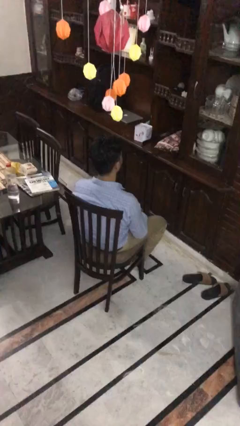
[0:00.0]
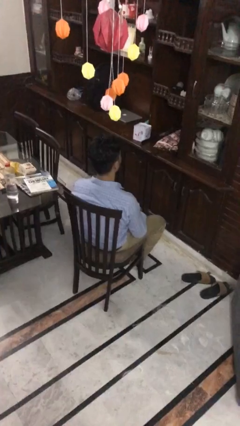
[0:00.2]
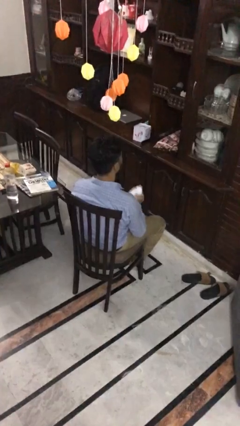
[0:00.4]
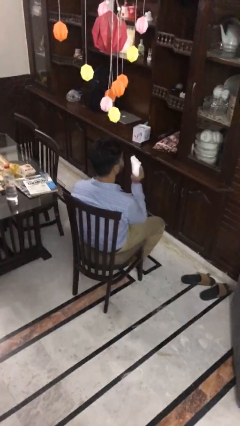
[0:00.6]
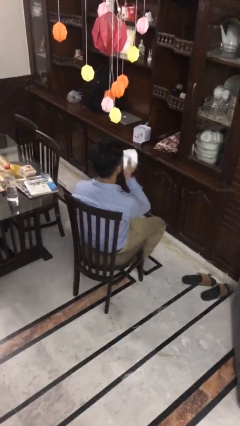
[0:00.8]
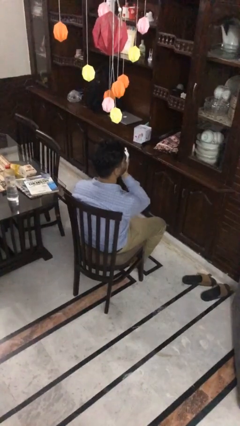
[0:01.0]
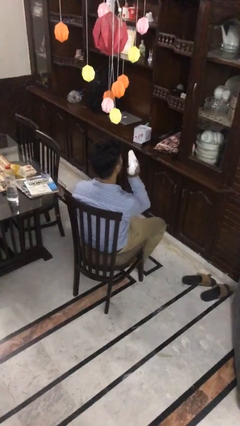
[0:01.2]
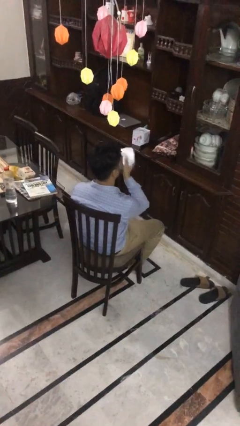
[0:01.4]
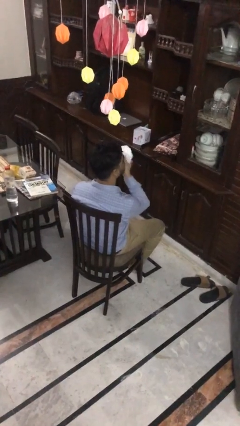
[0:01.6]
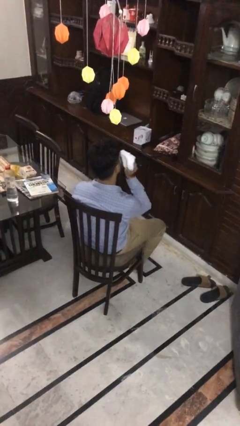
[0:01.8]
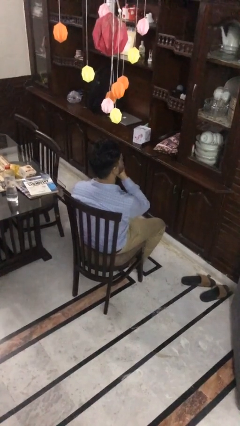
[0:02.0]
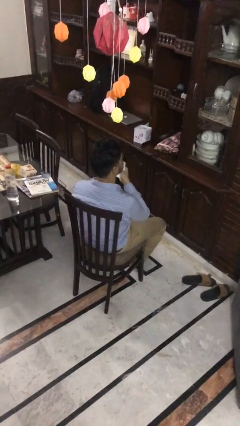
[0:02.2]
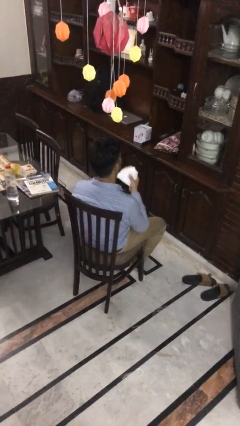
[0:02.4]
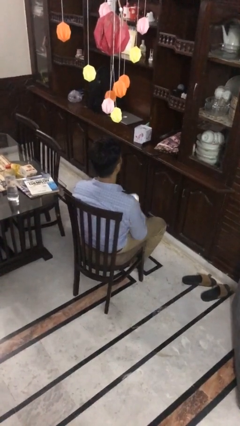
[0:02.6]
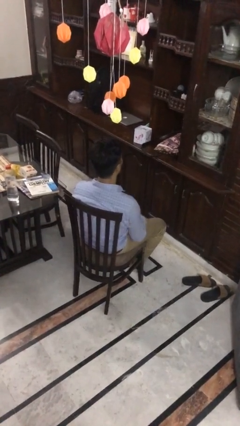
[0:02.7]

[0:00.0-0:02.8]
person wipes mouth with napkin

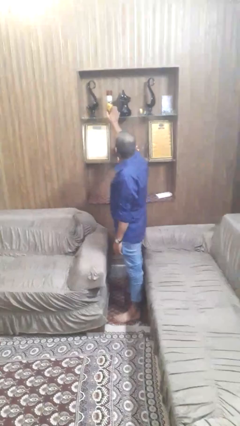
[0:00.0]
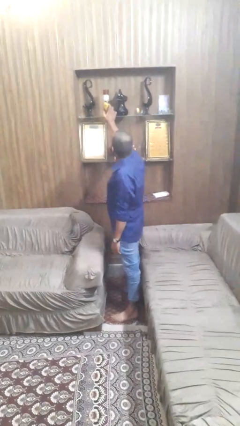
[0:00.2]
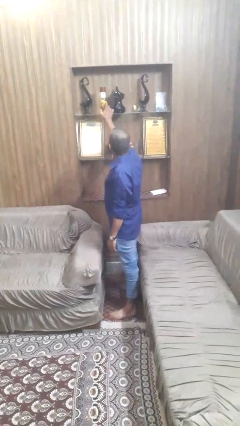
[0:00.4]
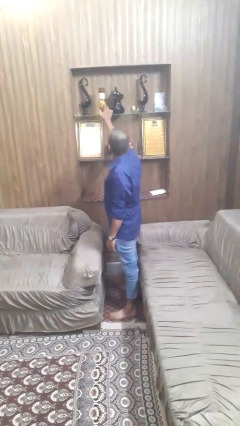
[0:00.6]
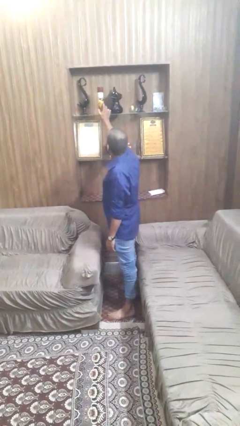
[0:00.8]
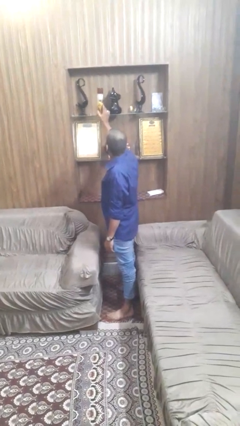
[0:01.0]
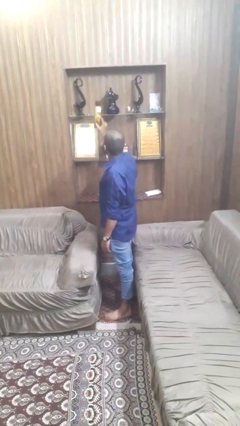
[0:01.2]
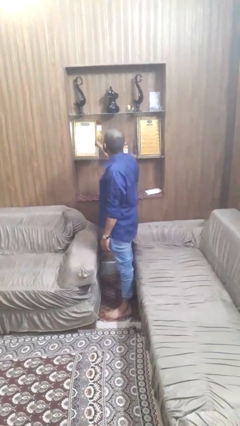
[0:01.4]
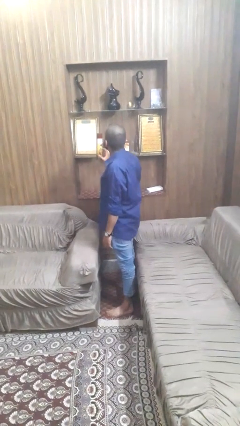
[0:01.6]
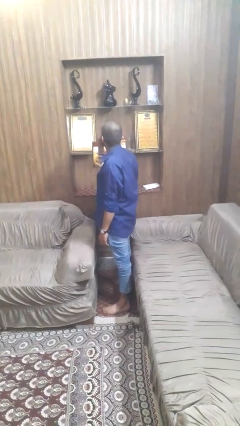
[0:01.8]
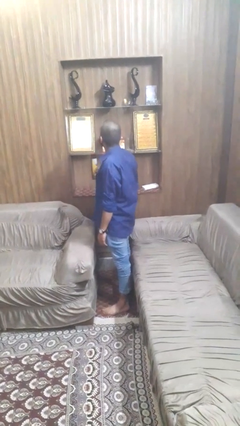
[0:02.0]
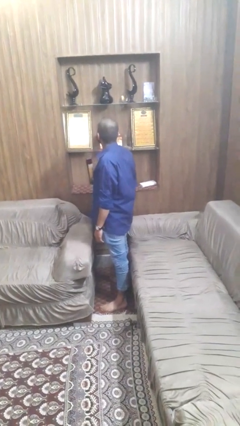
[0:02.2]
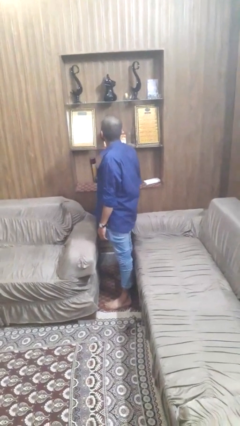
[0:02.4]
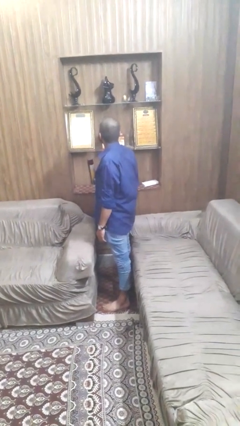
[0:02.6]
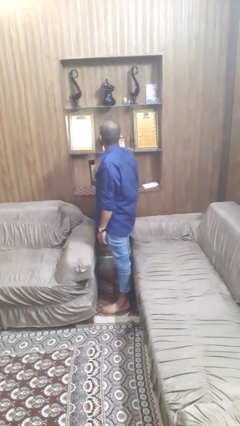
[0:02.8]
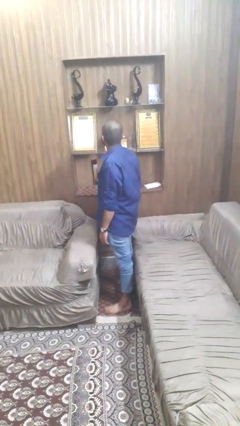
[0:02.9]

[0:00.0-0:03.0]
person picks up object from shelf

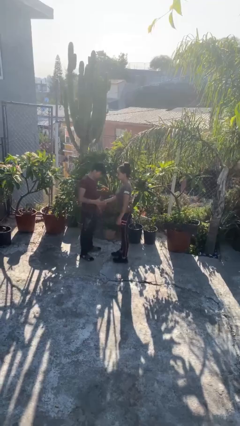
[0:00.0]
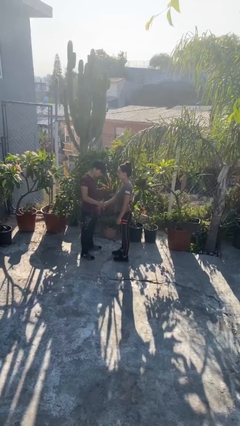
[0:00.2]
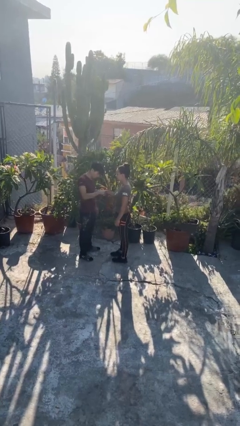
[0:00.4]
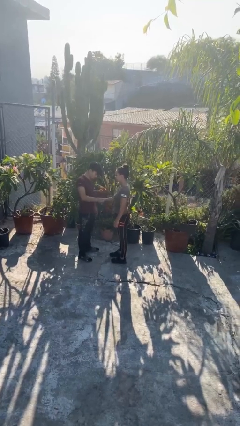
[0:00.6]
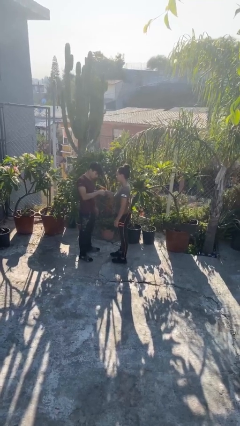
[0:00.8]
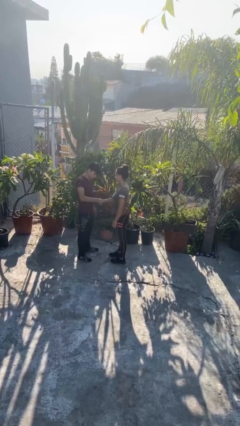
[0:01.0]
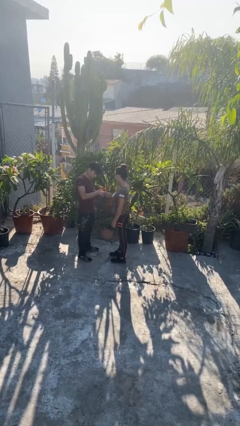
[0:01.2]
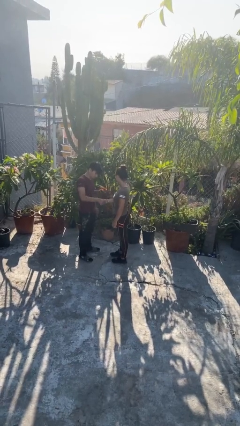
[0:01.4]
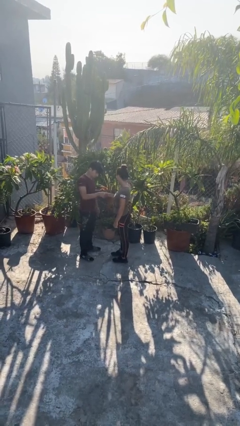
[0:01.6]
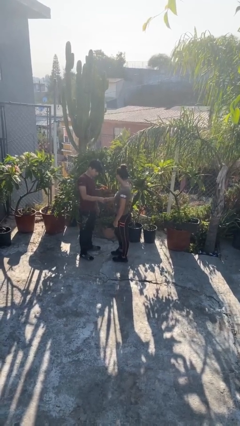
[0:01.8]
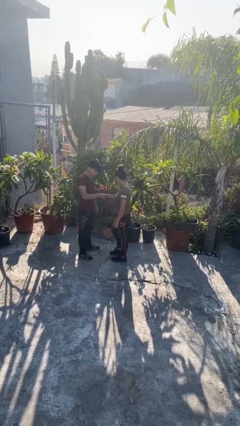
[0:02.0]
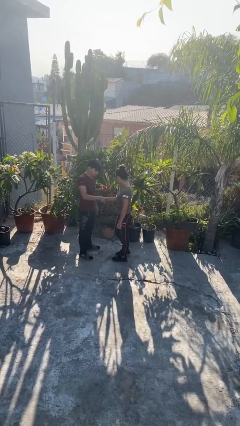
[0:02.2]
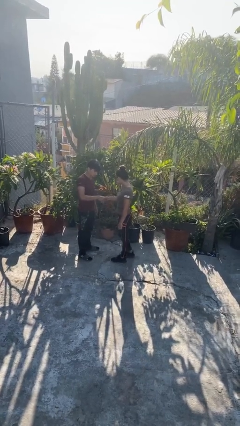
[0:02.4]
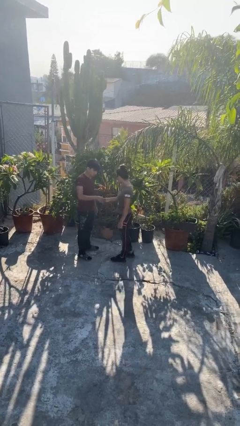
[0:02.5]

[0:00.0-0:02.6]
person shakes hand

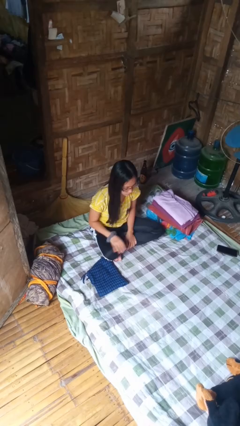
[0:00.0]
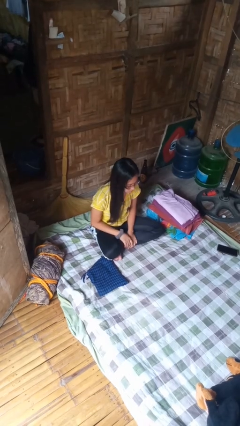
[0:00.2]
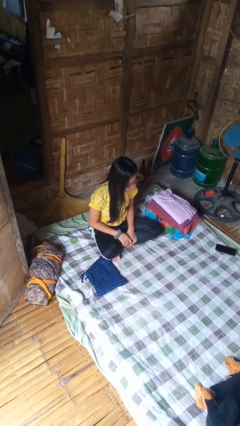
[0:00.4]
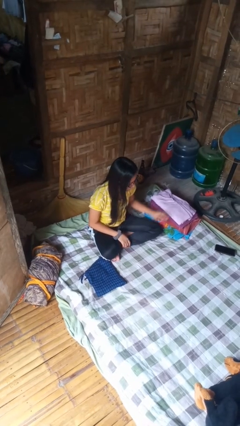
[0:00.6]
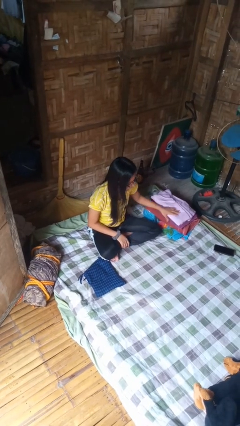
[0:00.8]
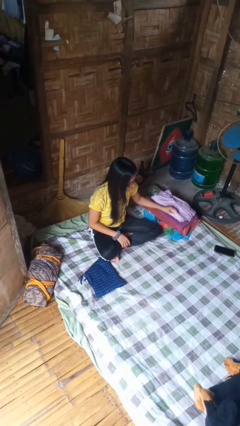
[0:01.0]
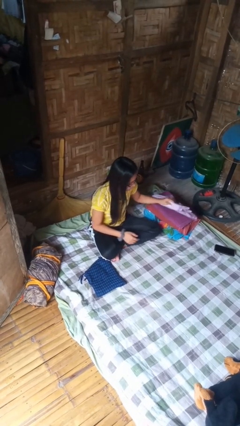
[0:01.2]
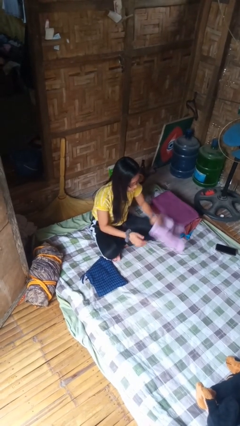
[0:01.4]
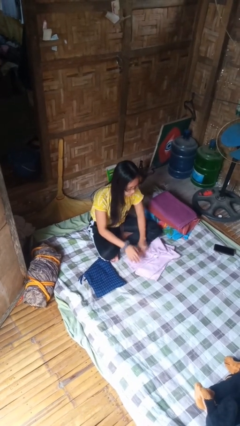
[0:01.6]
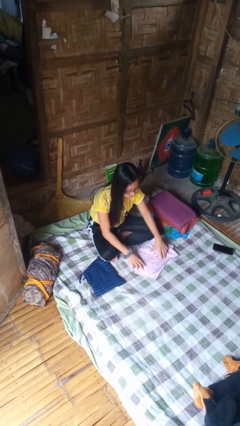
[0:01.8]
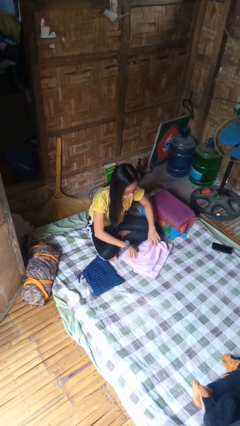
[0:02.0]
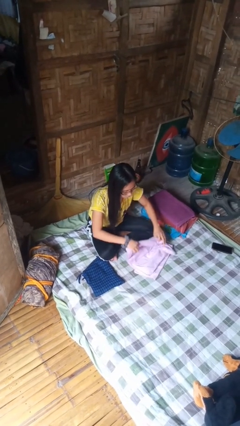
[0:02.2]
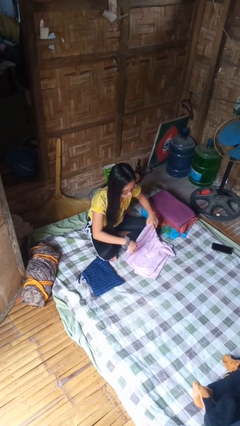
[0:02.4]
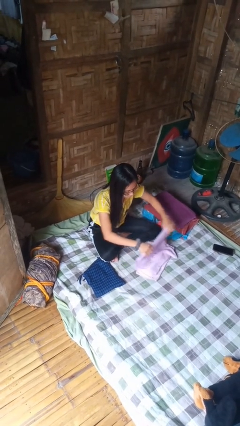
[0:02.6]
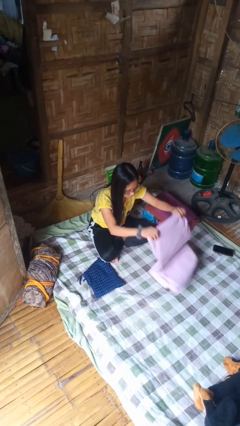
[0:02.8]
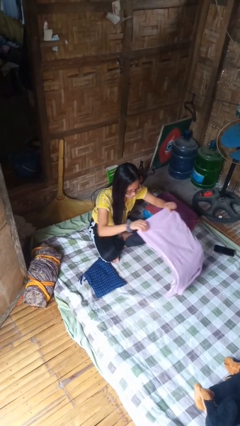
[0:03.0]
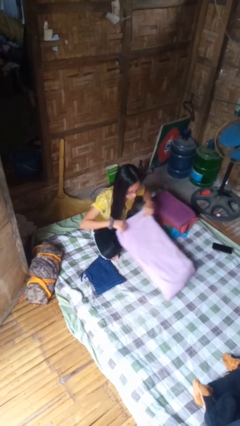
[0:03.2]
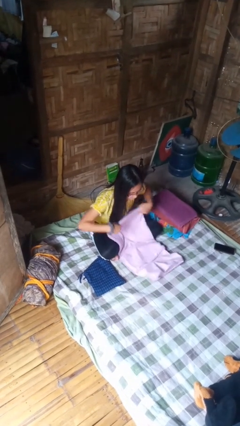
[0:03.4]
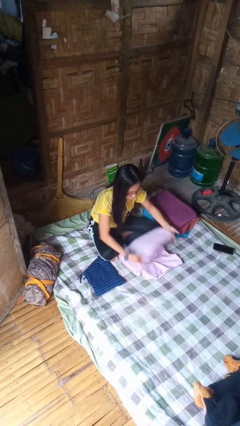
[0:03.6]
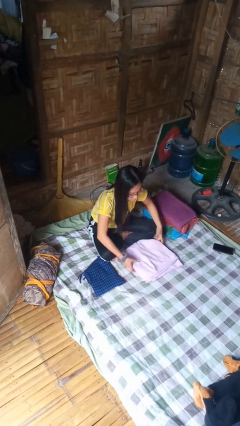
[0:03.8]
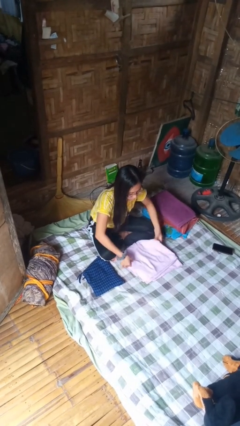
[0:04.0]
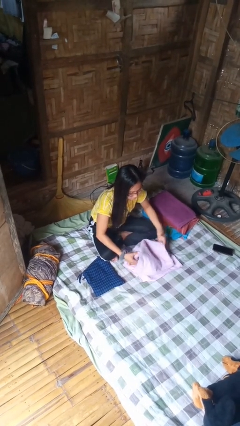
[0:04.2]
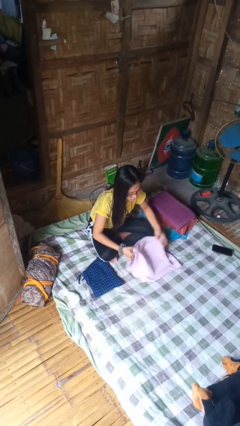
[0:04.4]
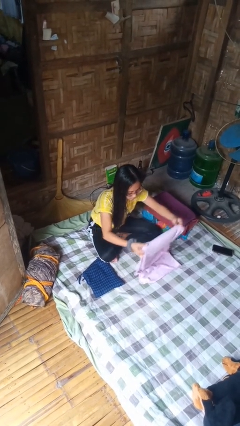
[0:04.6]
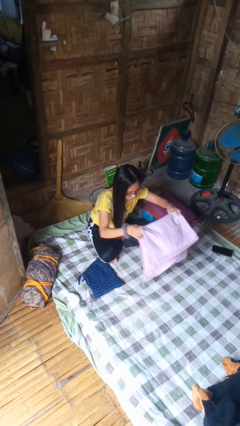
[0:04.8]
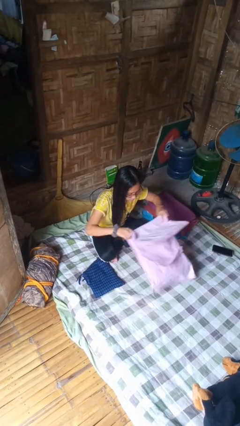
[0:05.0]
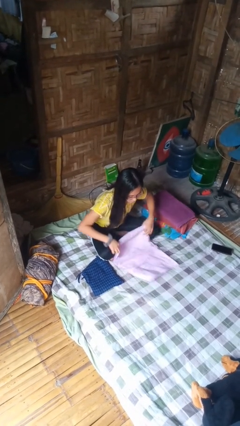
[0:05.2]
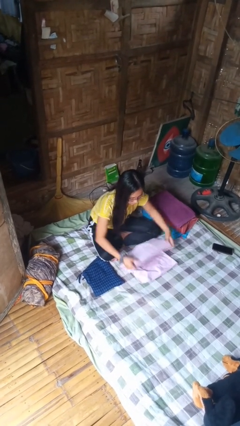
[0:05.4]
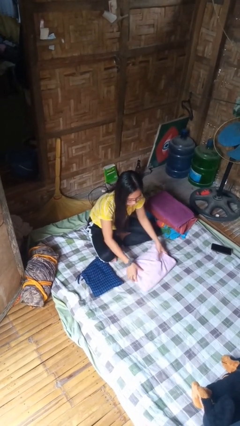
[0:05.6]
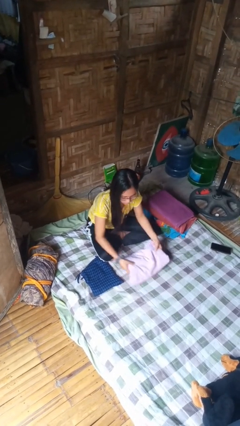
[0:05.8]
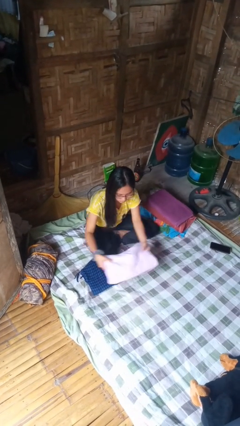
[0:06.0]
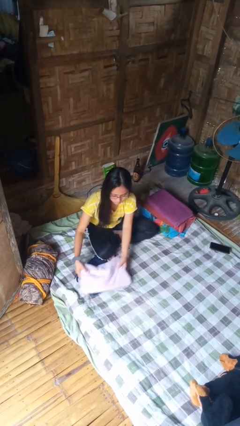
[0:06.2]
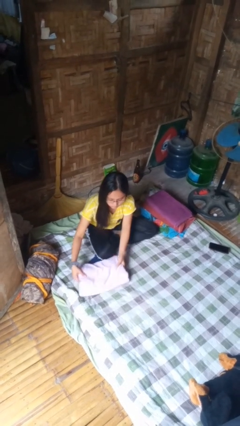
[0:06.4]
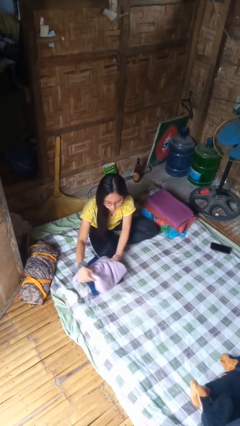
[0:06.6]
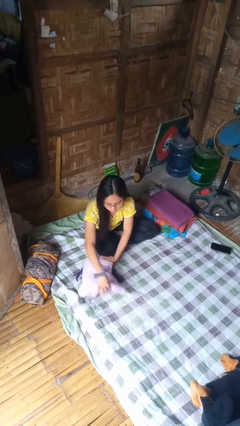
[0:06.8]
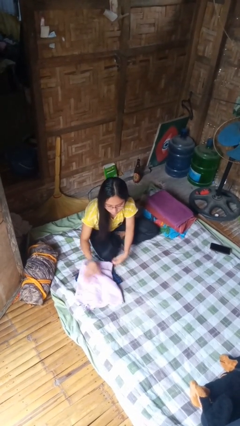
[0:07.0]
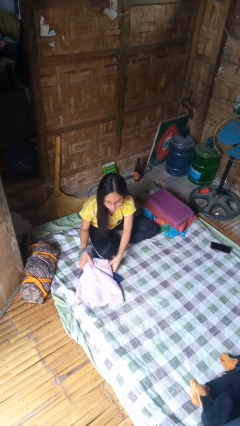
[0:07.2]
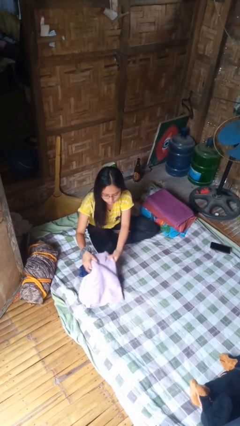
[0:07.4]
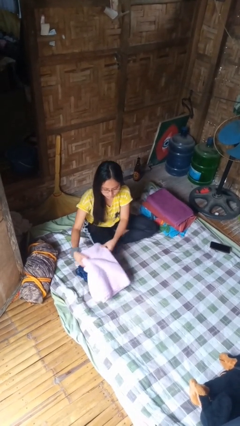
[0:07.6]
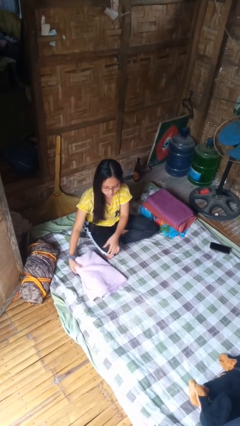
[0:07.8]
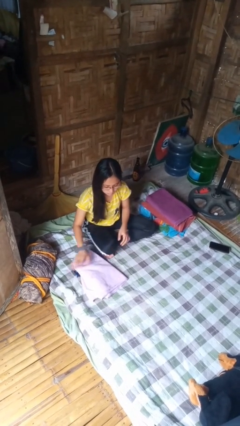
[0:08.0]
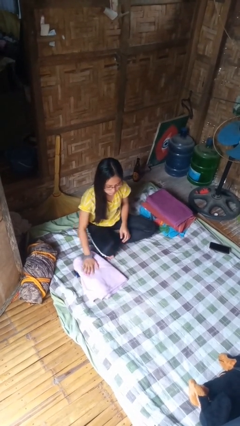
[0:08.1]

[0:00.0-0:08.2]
person folds towel

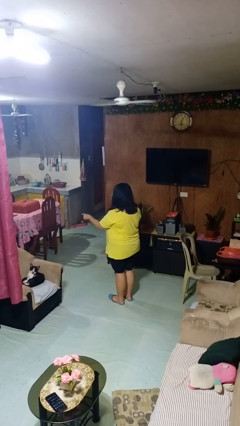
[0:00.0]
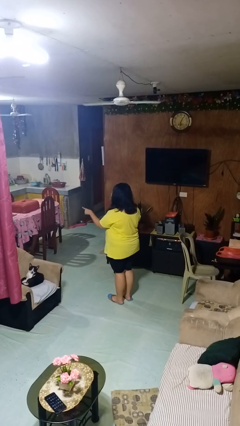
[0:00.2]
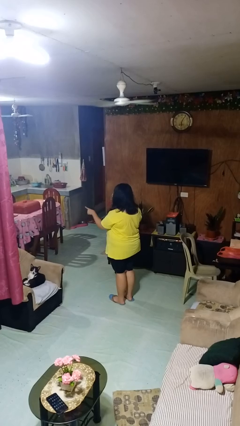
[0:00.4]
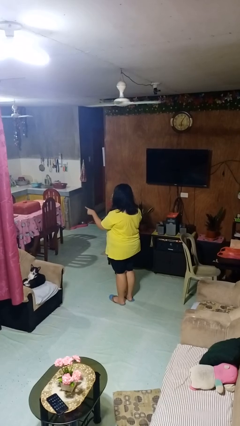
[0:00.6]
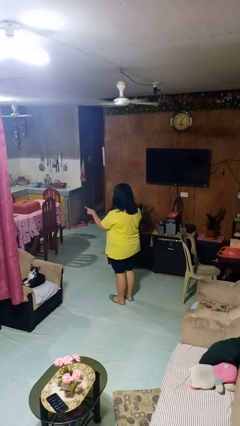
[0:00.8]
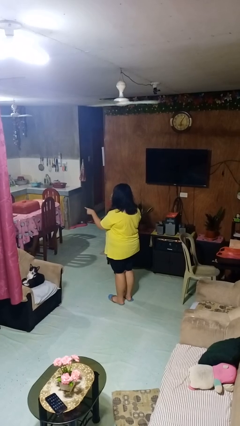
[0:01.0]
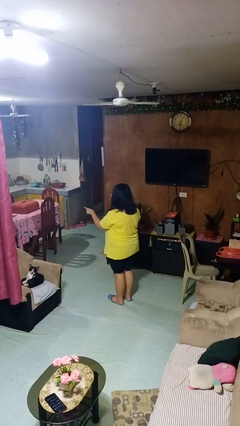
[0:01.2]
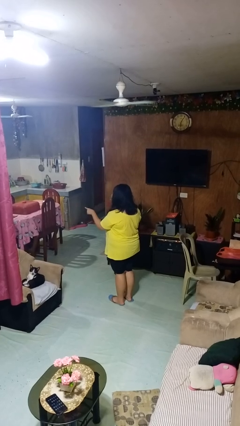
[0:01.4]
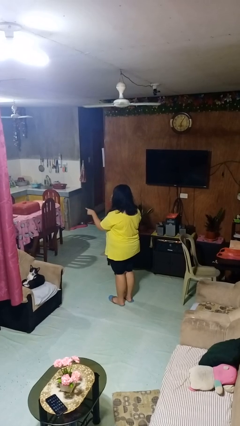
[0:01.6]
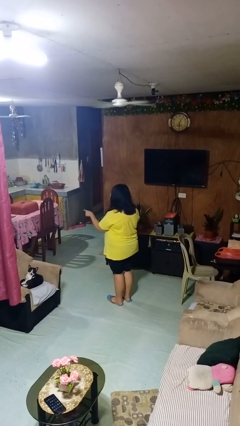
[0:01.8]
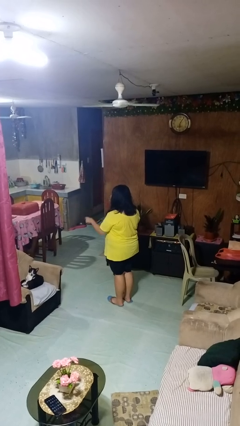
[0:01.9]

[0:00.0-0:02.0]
person points at person
